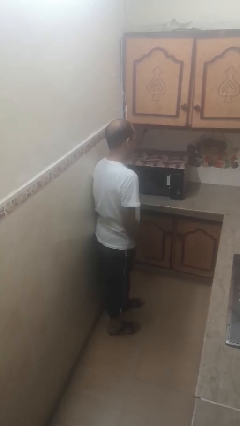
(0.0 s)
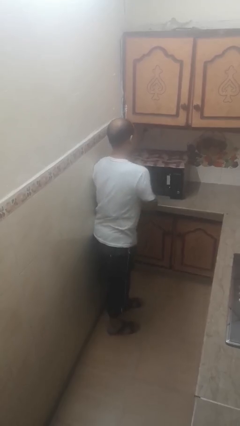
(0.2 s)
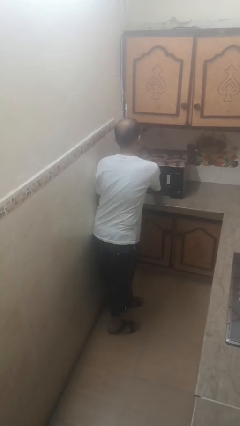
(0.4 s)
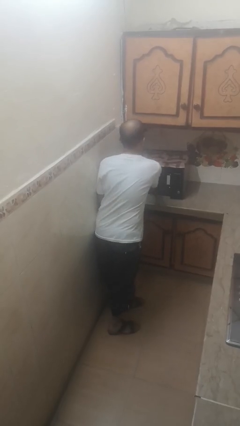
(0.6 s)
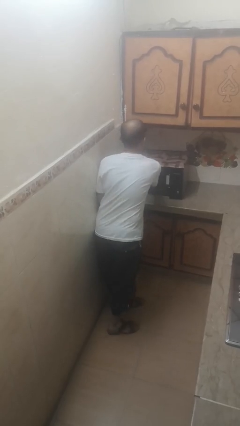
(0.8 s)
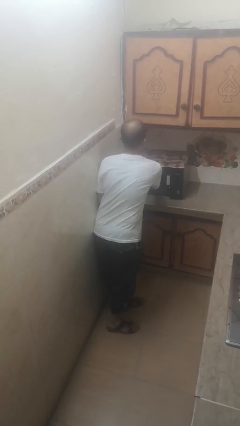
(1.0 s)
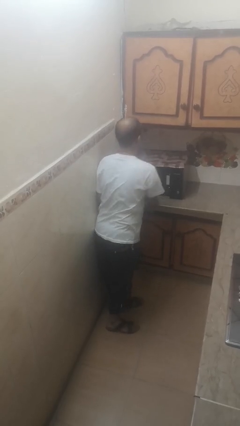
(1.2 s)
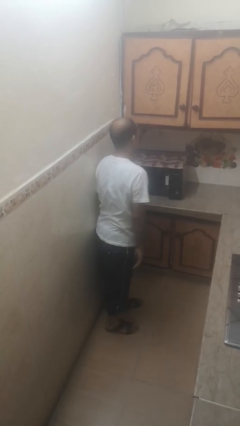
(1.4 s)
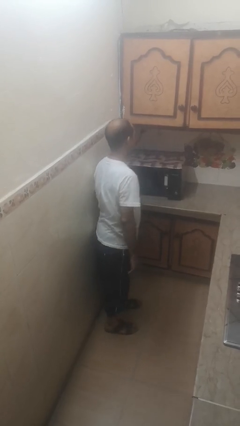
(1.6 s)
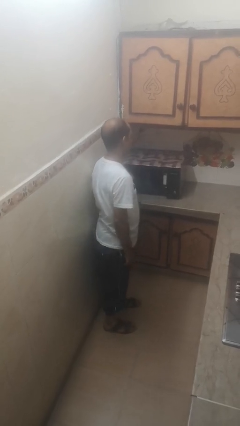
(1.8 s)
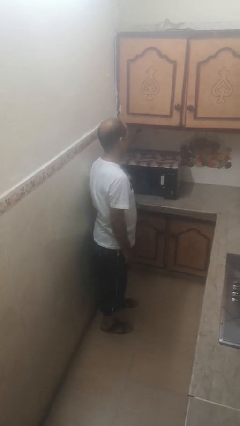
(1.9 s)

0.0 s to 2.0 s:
person puts object into microwave

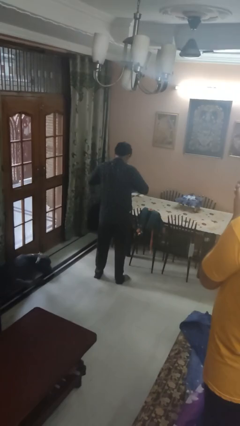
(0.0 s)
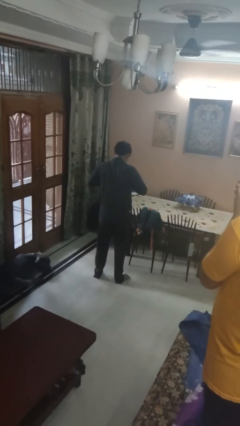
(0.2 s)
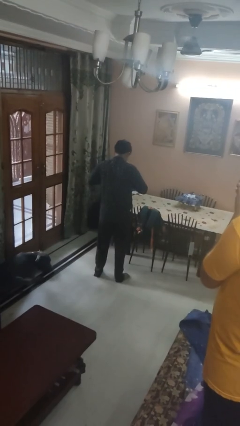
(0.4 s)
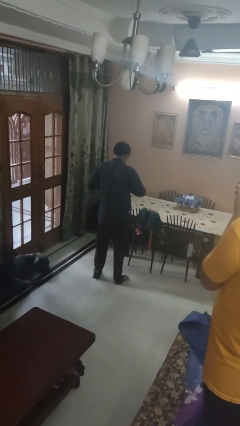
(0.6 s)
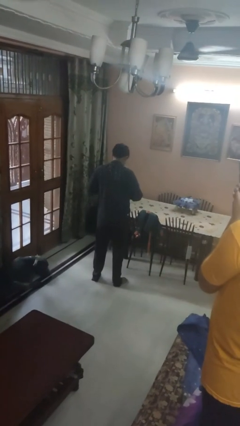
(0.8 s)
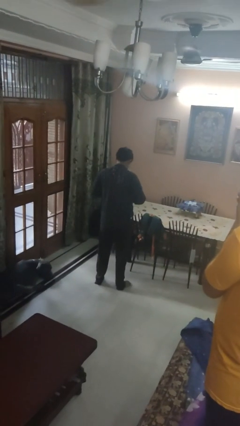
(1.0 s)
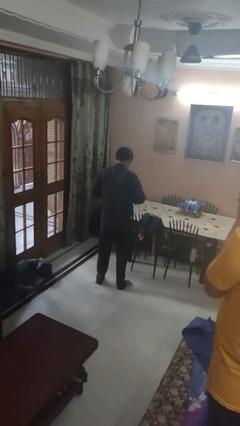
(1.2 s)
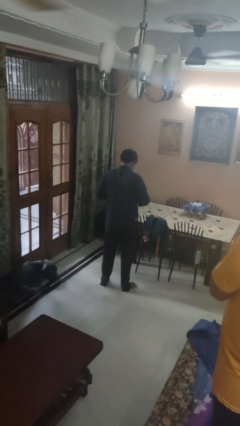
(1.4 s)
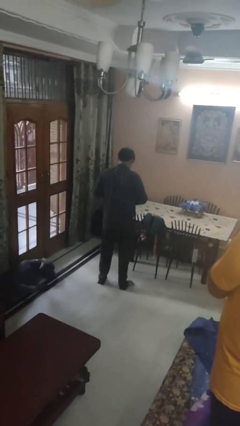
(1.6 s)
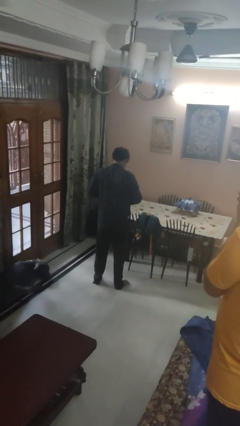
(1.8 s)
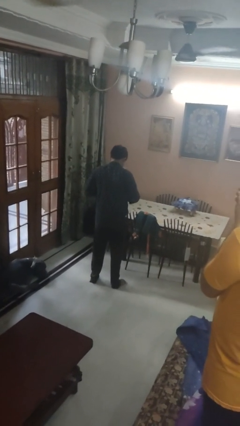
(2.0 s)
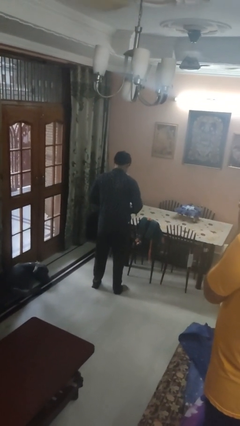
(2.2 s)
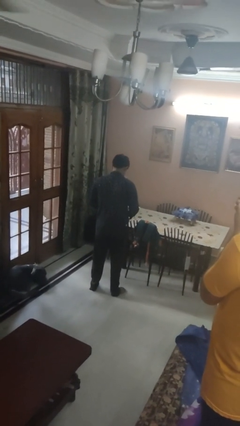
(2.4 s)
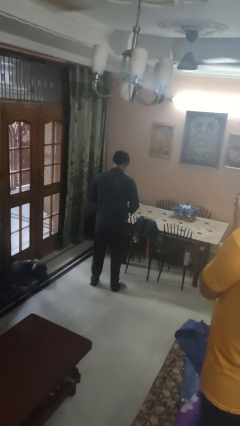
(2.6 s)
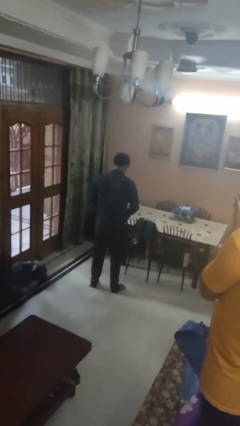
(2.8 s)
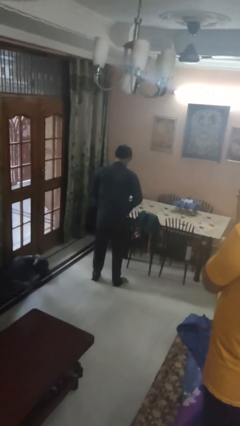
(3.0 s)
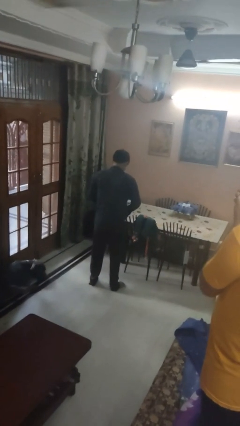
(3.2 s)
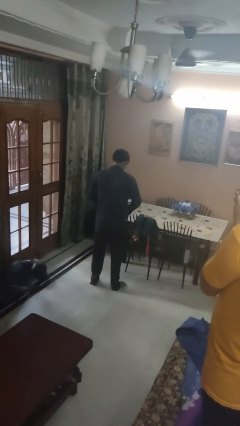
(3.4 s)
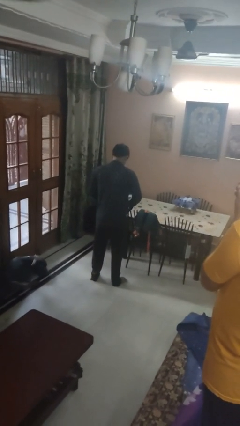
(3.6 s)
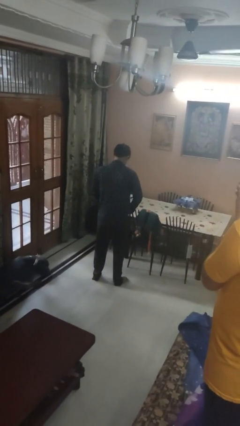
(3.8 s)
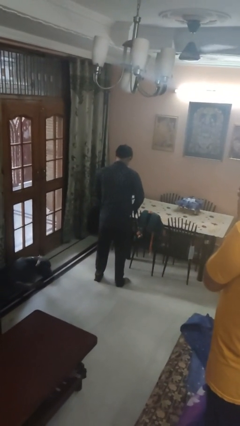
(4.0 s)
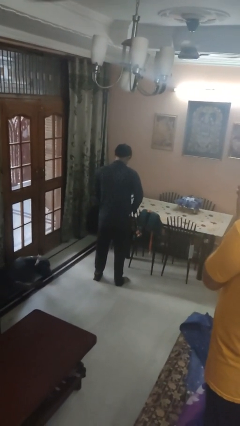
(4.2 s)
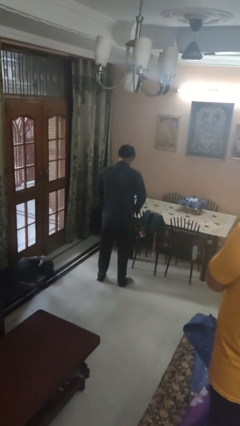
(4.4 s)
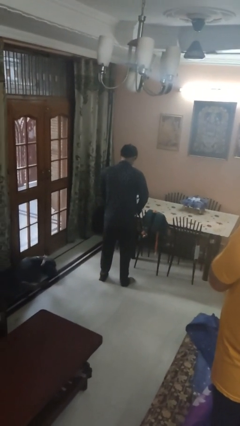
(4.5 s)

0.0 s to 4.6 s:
person buttons shirt

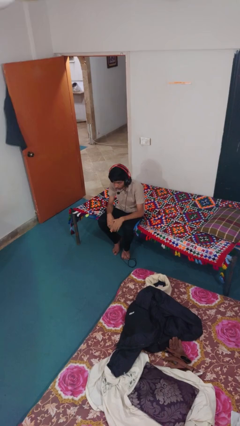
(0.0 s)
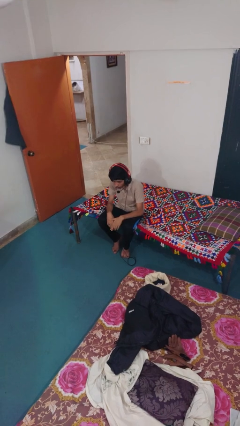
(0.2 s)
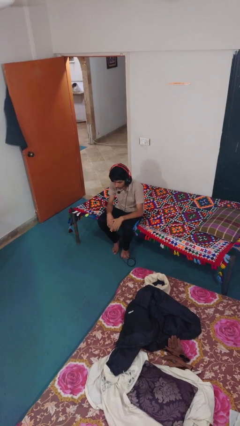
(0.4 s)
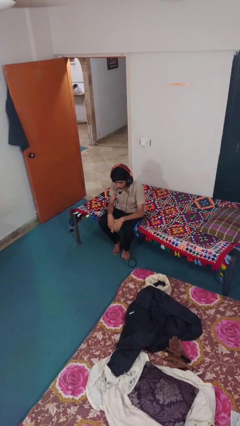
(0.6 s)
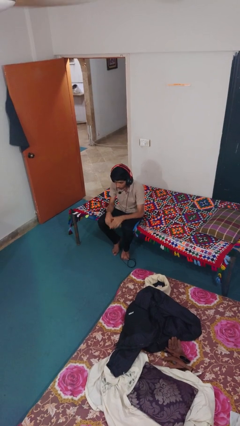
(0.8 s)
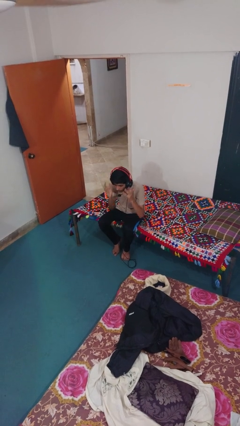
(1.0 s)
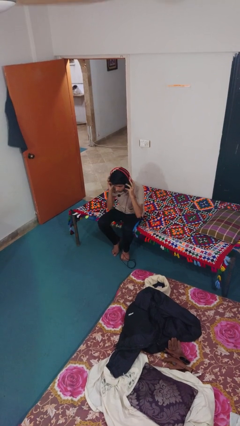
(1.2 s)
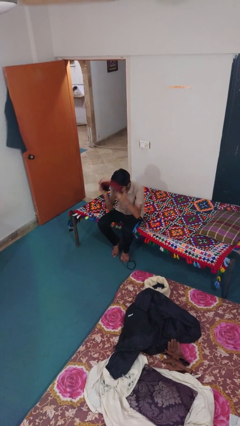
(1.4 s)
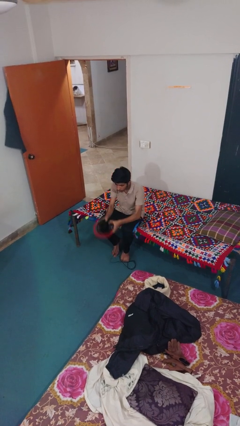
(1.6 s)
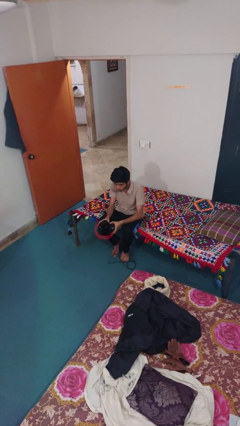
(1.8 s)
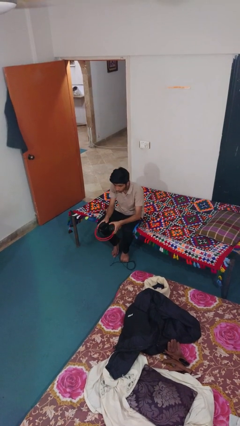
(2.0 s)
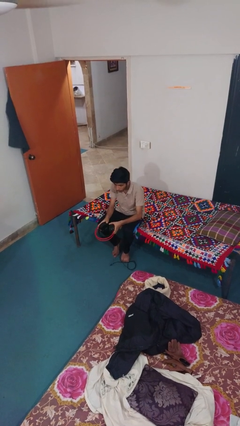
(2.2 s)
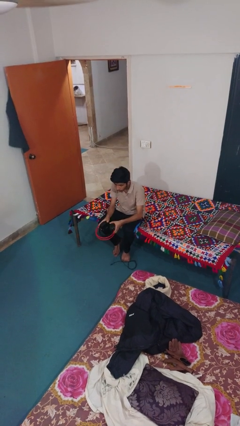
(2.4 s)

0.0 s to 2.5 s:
person takes off headphones

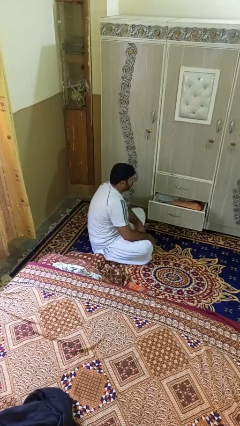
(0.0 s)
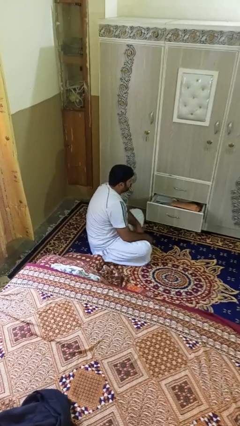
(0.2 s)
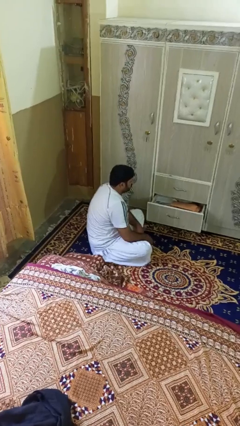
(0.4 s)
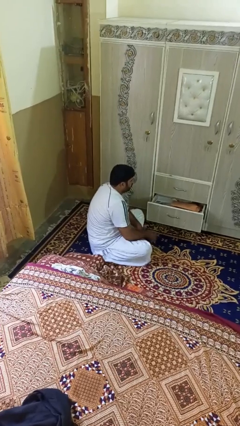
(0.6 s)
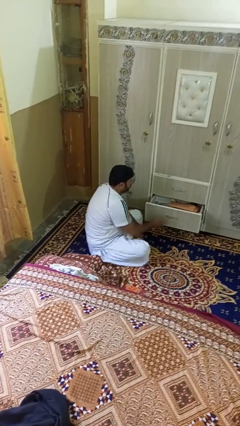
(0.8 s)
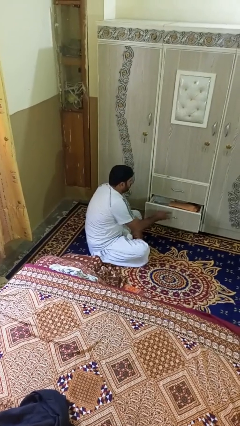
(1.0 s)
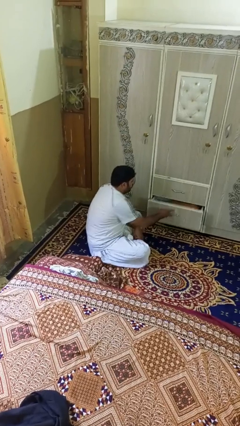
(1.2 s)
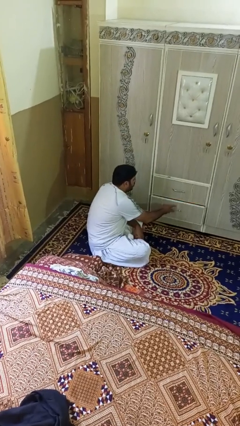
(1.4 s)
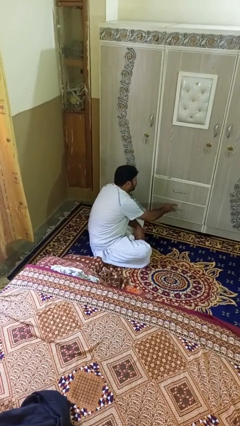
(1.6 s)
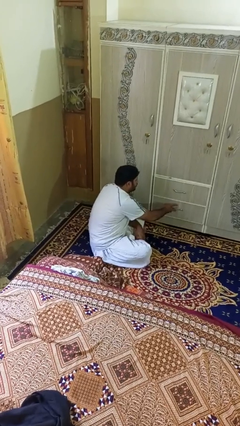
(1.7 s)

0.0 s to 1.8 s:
person closes dresser drawer

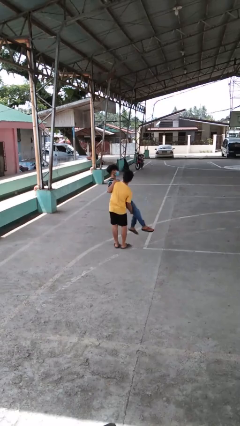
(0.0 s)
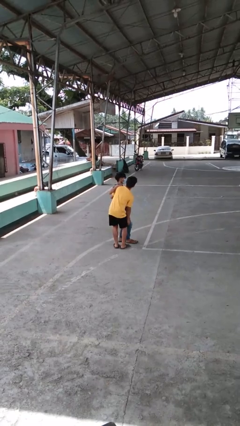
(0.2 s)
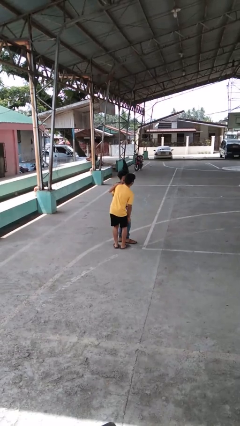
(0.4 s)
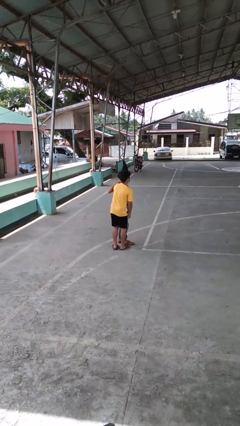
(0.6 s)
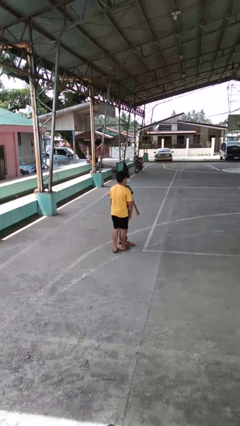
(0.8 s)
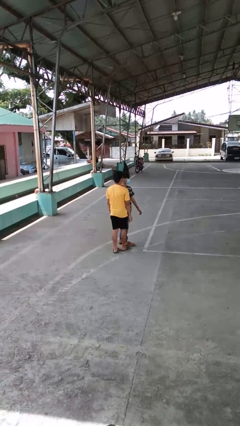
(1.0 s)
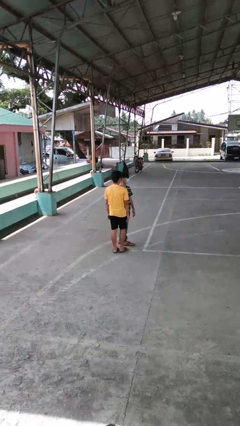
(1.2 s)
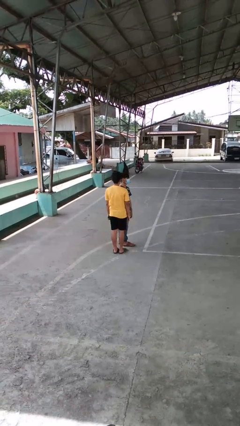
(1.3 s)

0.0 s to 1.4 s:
person puts down person

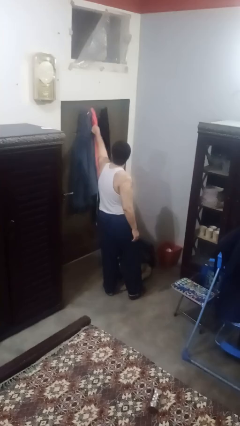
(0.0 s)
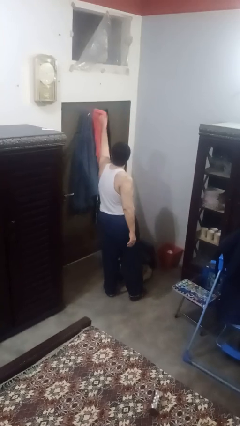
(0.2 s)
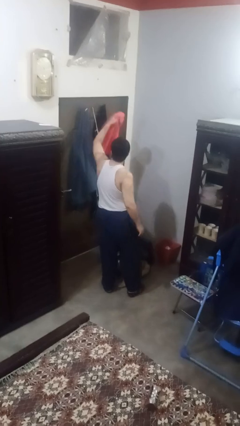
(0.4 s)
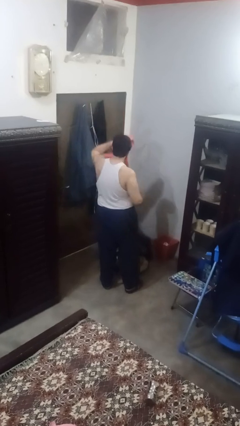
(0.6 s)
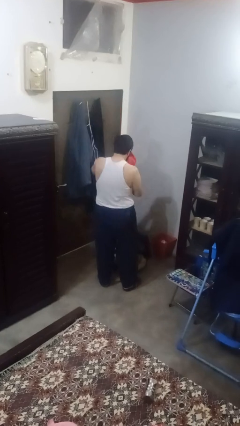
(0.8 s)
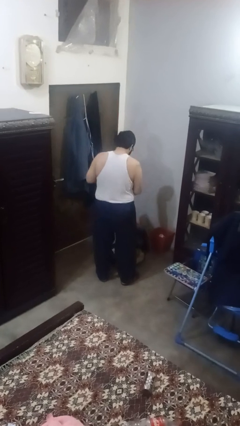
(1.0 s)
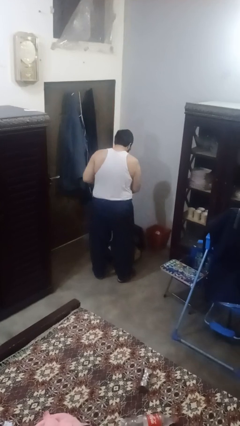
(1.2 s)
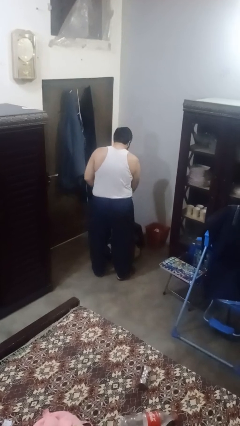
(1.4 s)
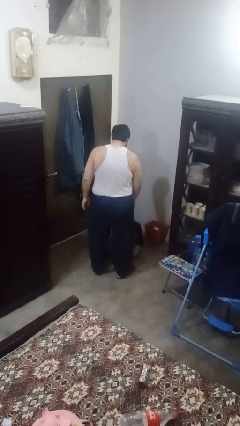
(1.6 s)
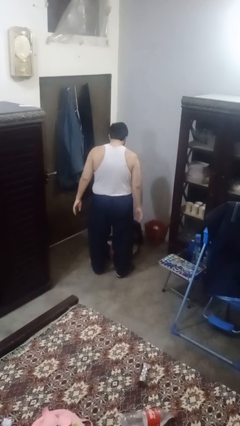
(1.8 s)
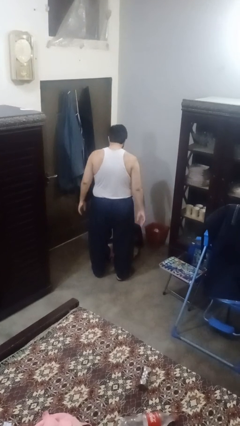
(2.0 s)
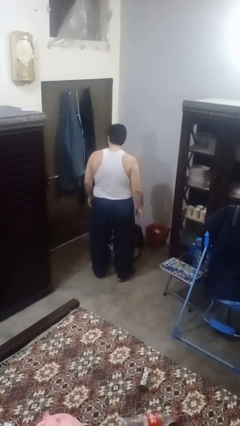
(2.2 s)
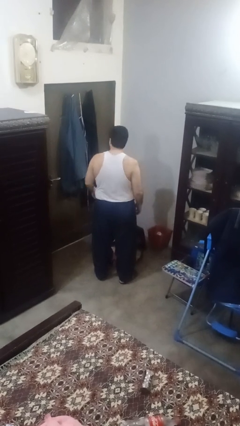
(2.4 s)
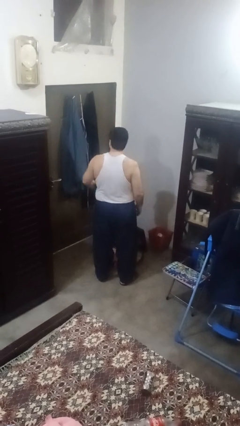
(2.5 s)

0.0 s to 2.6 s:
person loads clothes into suitcase

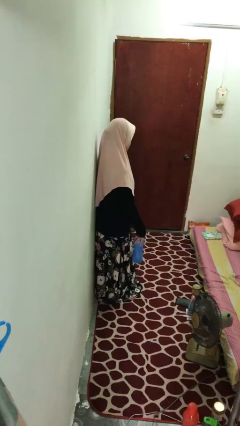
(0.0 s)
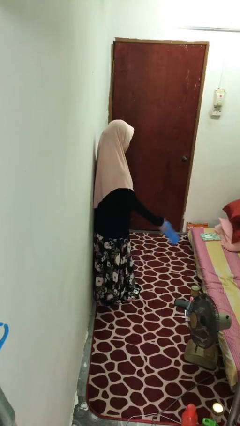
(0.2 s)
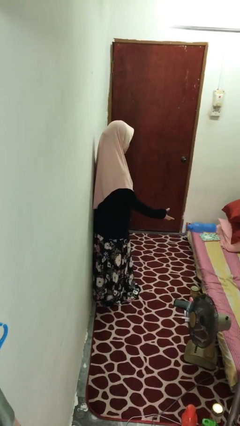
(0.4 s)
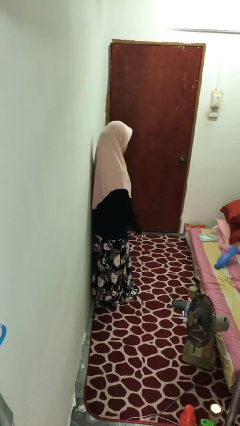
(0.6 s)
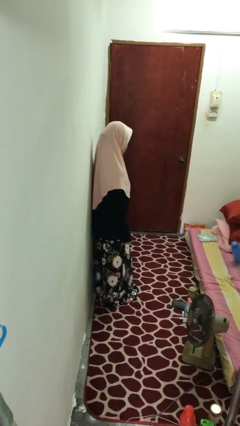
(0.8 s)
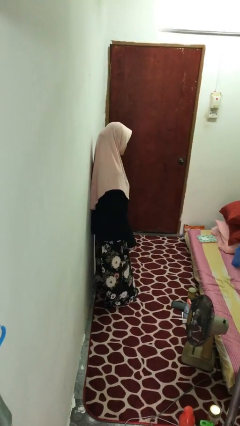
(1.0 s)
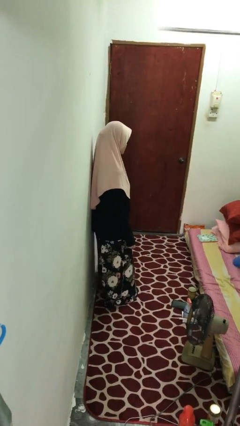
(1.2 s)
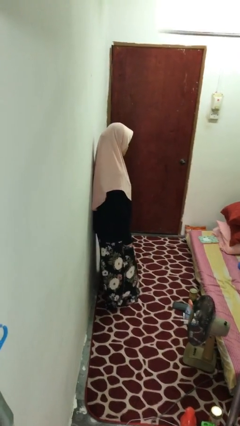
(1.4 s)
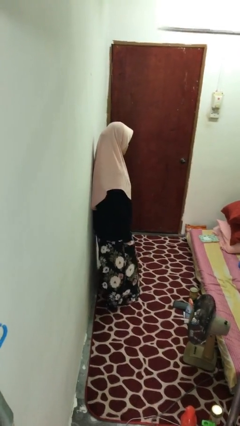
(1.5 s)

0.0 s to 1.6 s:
person throws object on bed

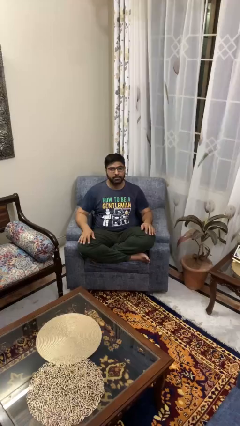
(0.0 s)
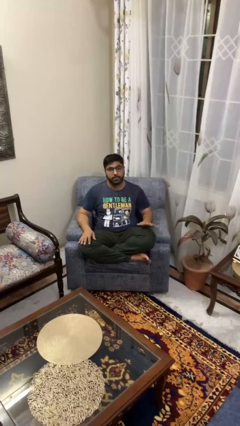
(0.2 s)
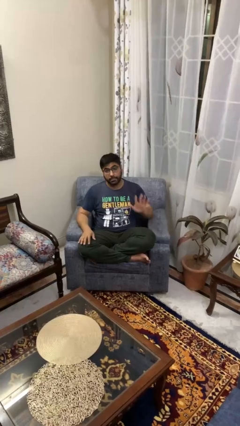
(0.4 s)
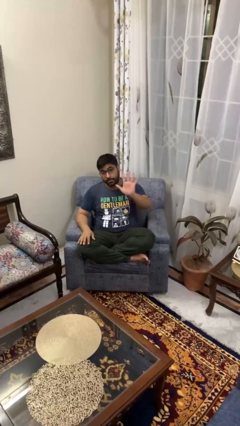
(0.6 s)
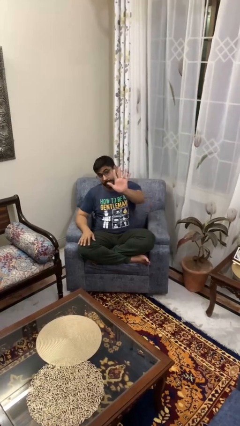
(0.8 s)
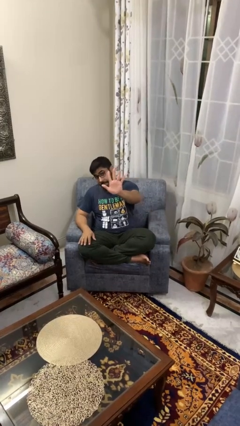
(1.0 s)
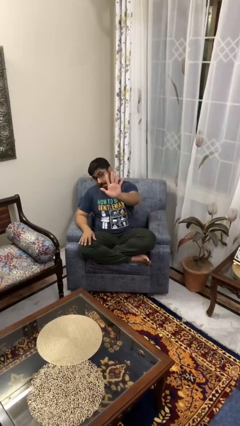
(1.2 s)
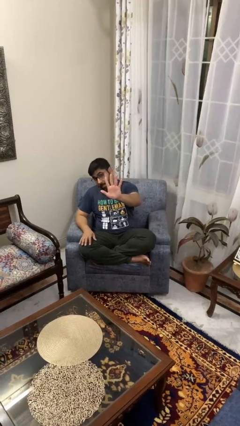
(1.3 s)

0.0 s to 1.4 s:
person gestures number five
